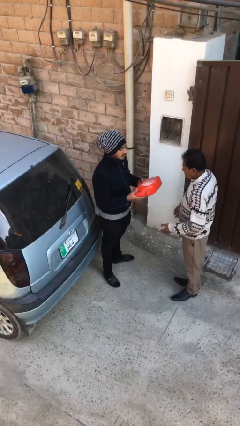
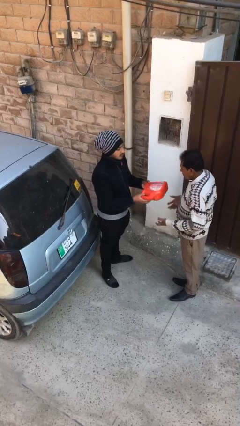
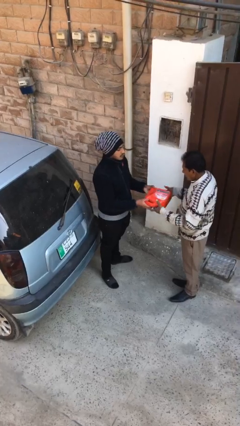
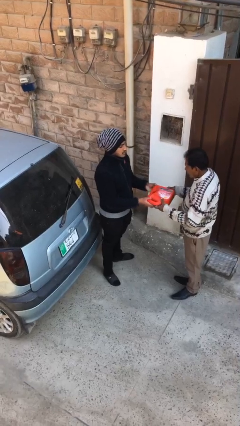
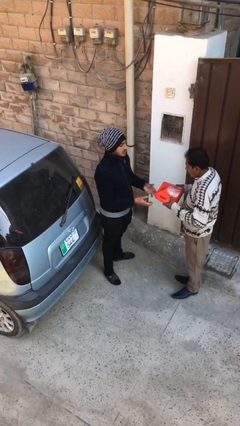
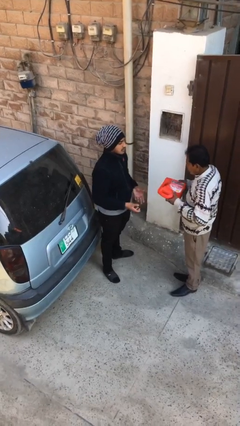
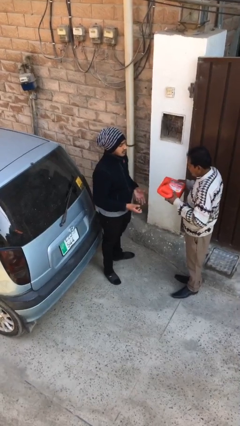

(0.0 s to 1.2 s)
person transfers object to person

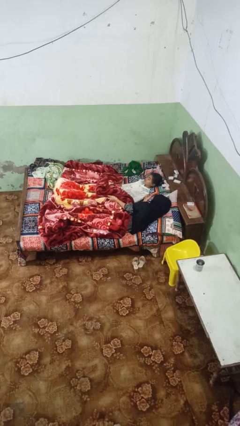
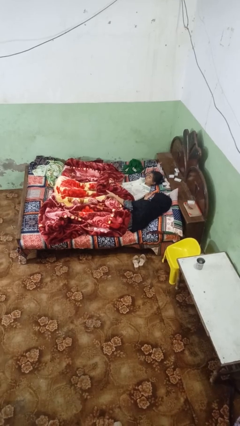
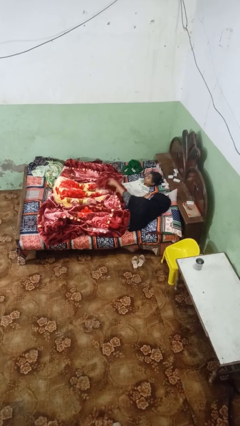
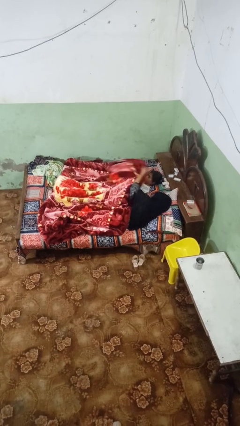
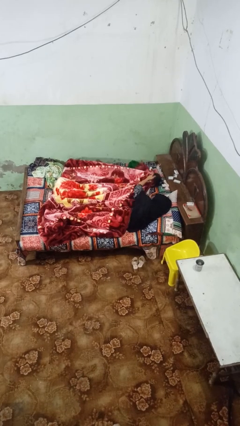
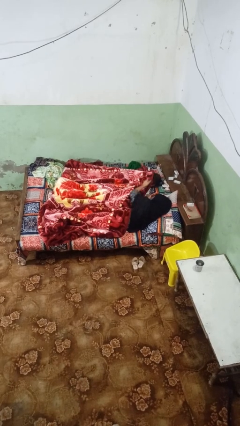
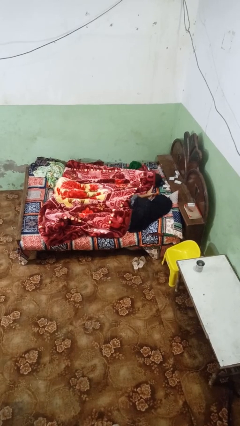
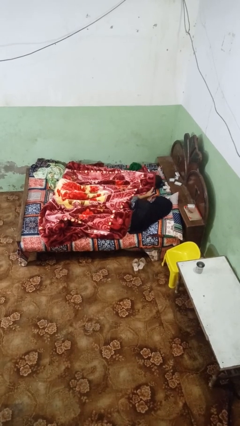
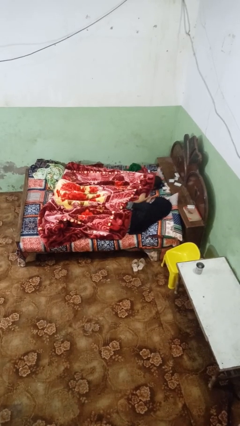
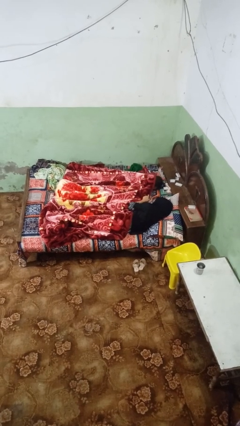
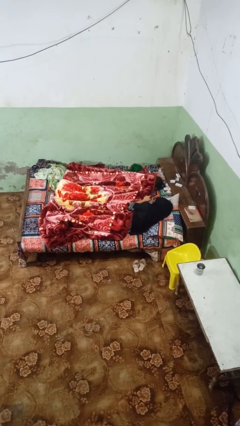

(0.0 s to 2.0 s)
person covers friend with blanket

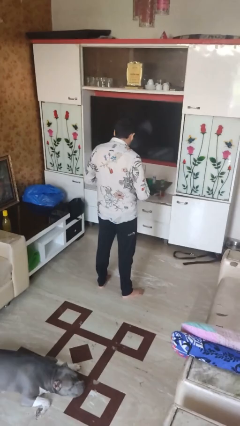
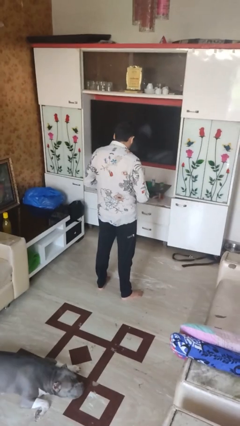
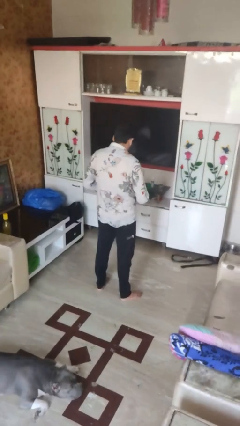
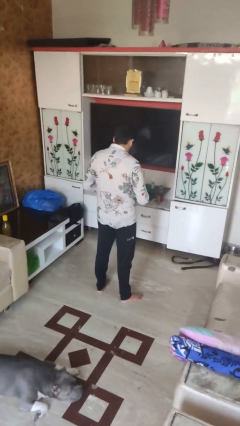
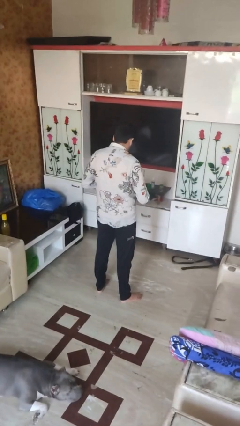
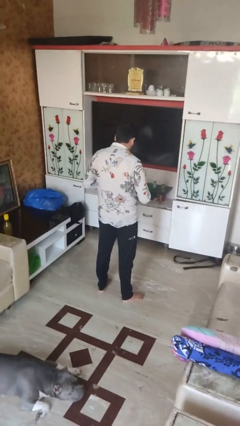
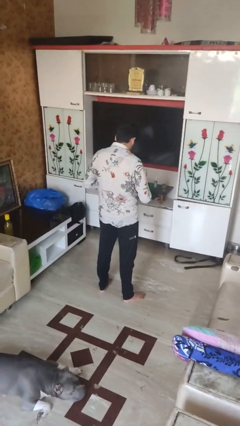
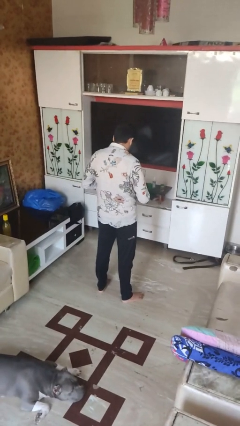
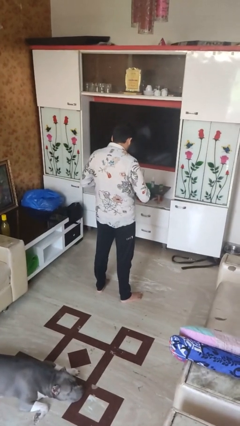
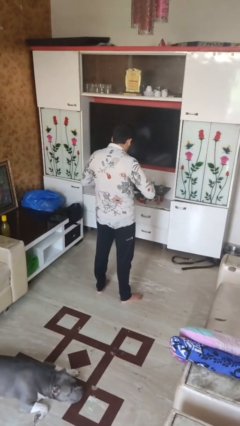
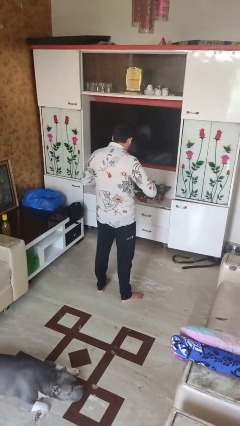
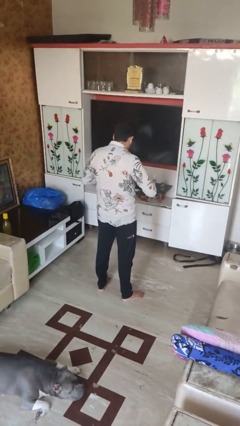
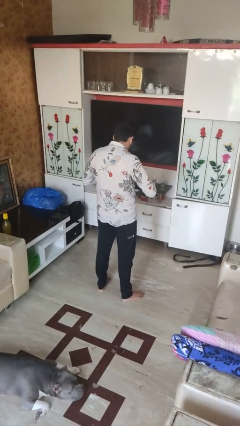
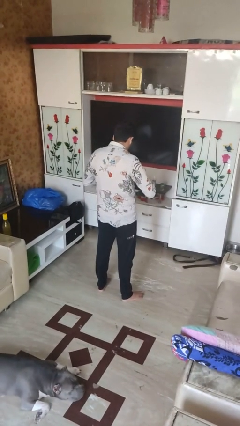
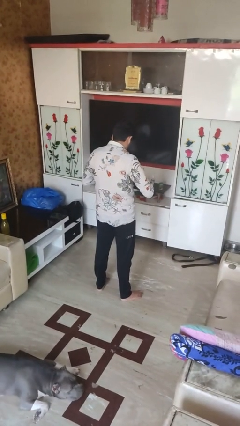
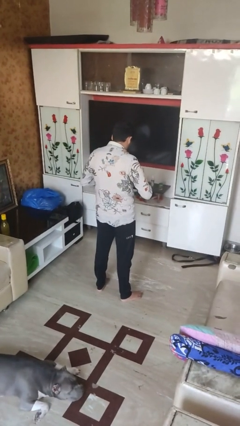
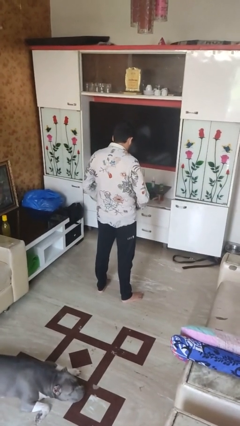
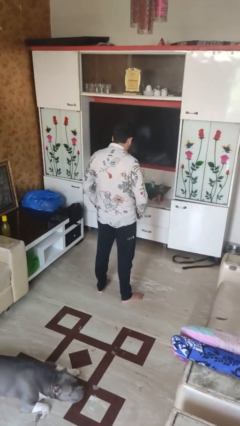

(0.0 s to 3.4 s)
person buttons shirt

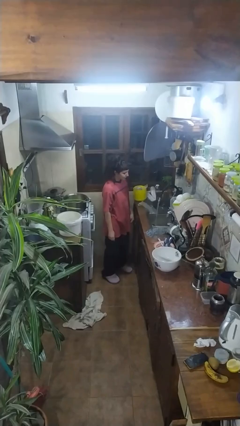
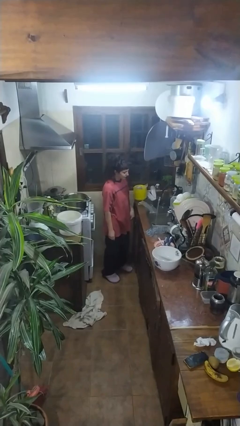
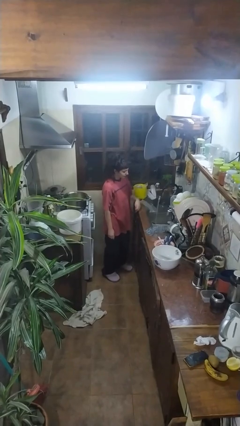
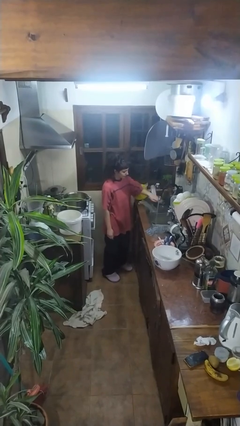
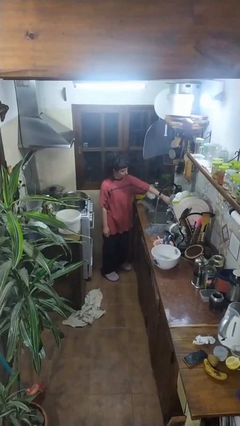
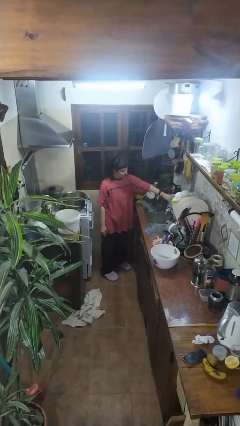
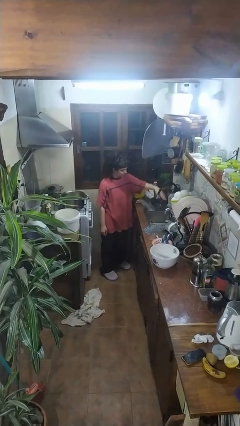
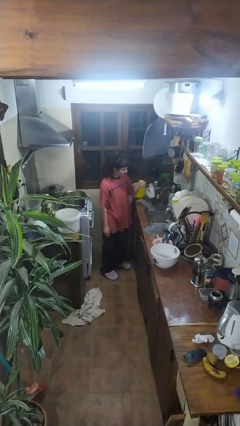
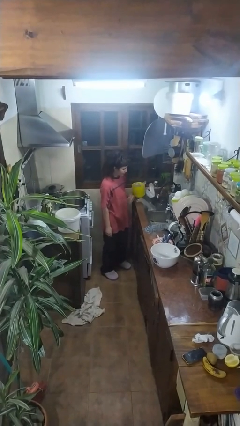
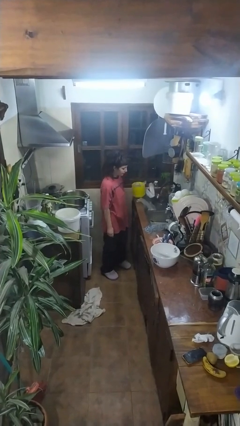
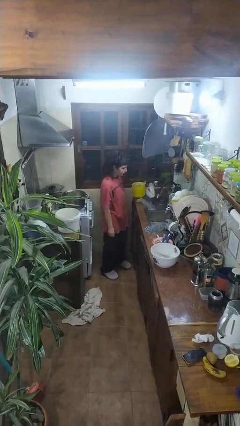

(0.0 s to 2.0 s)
person turns off faucet

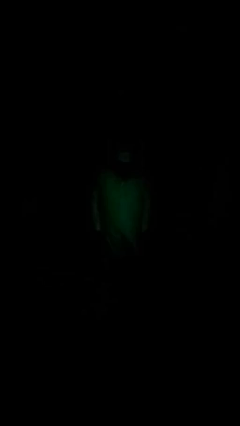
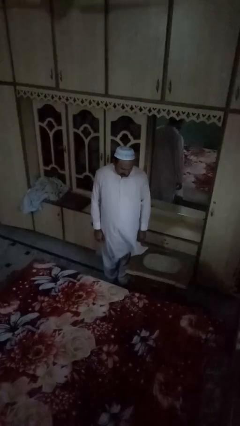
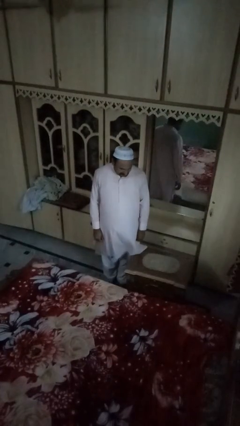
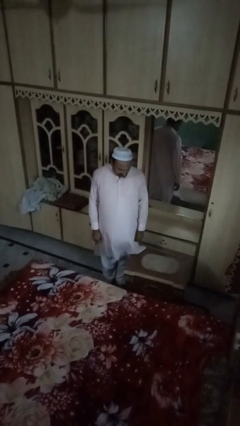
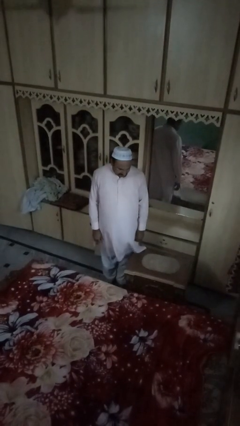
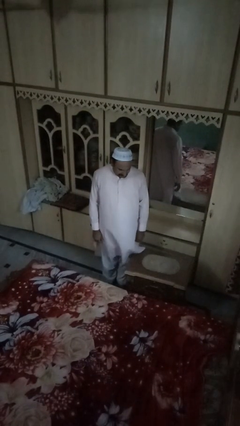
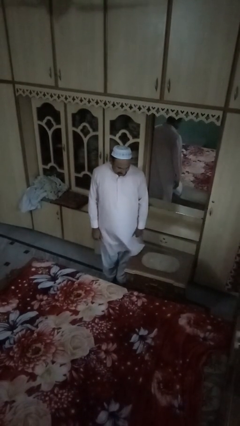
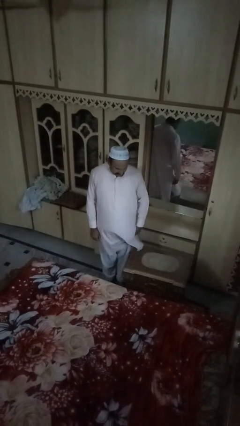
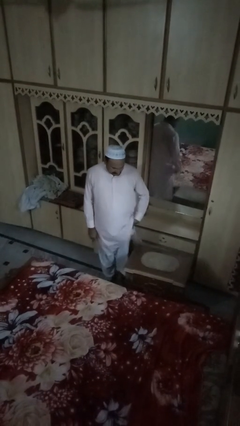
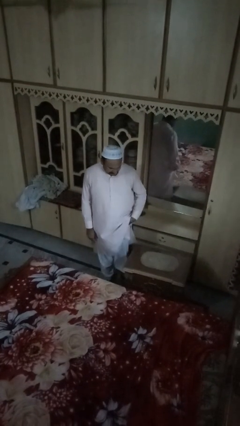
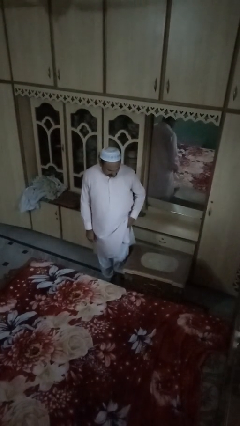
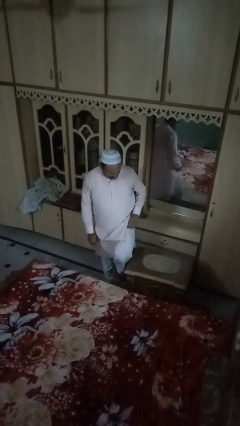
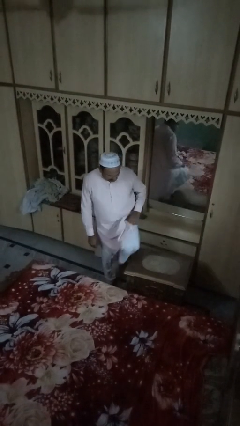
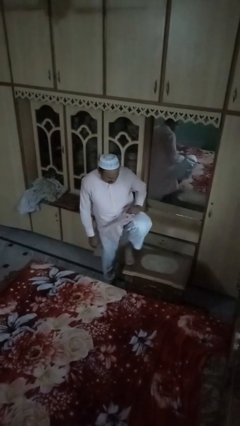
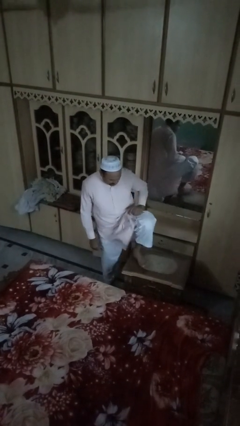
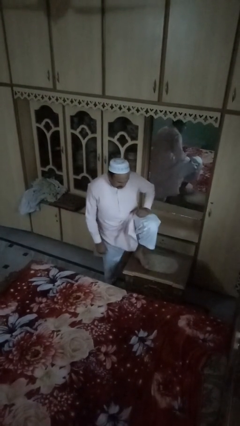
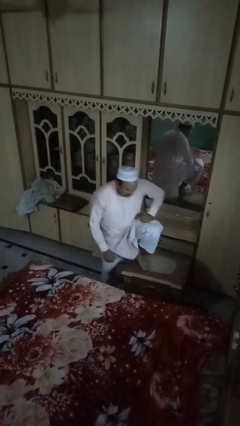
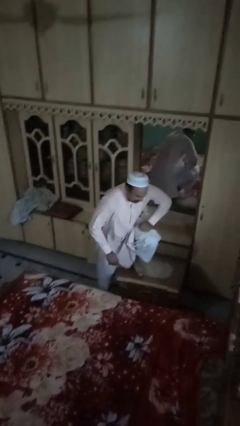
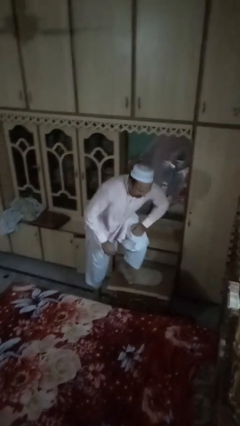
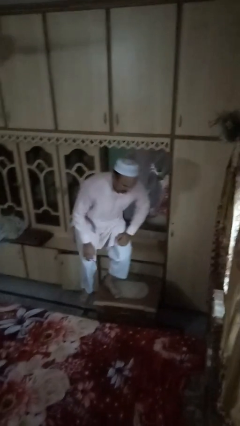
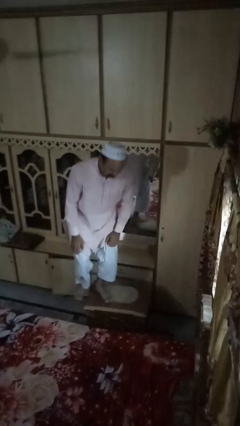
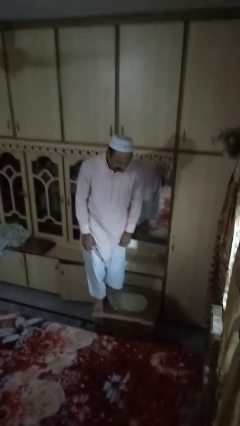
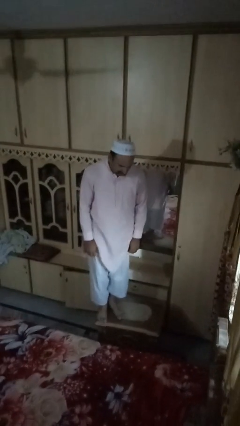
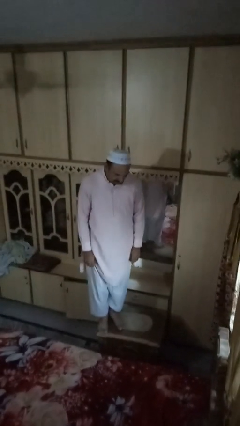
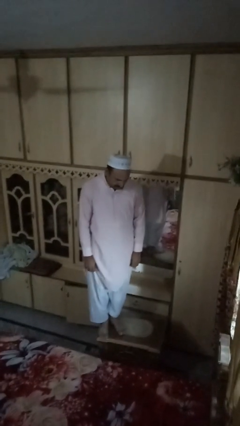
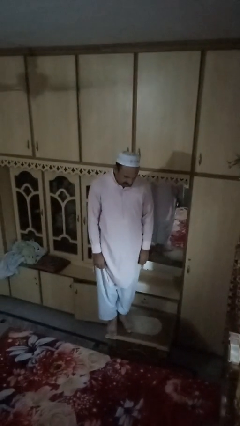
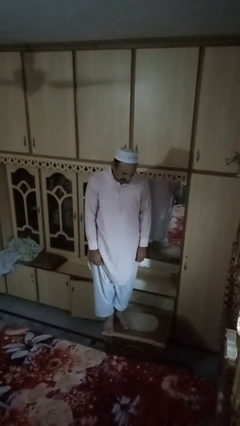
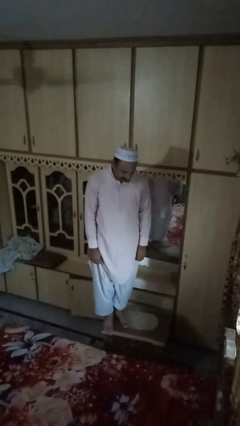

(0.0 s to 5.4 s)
person climbs on table

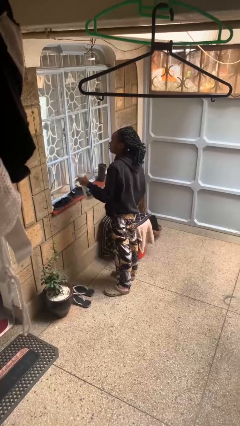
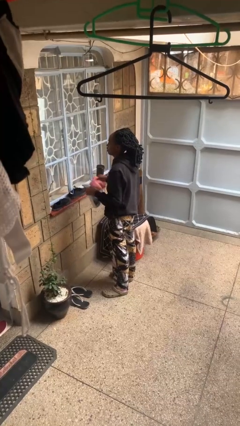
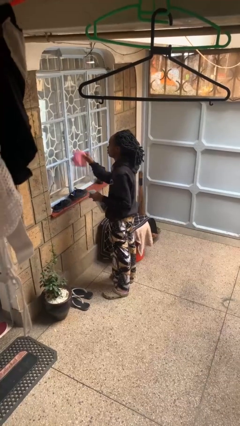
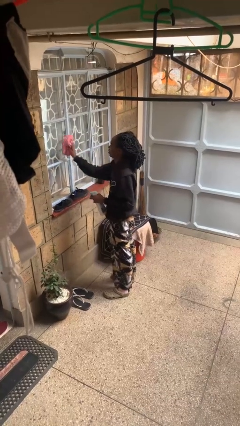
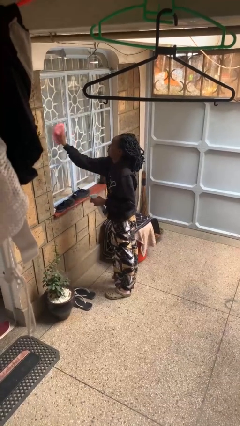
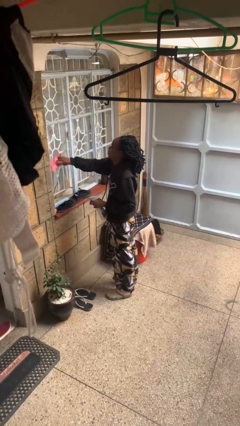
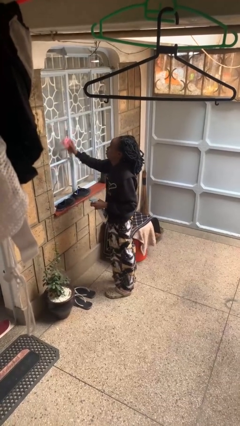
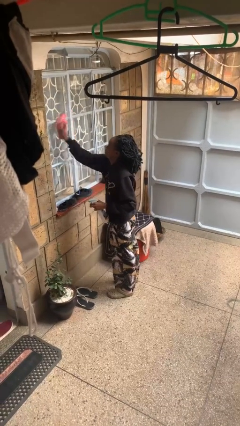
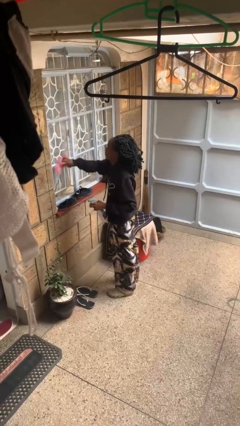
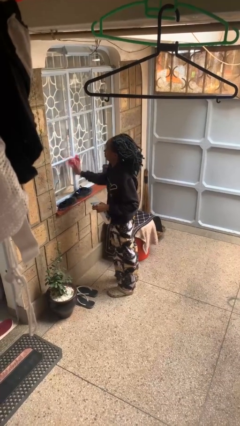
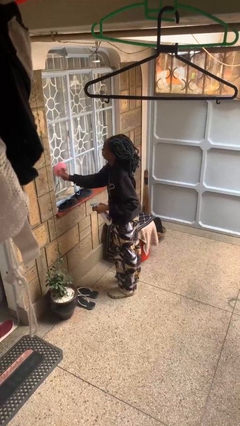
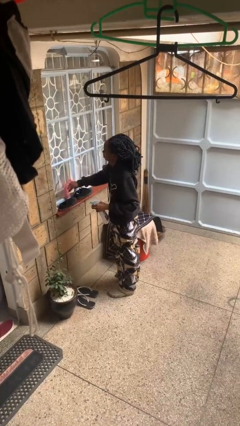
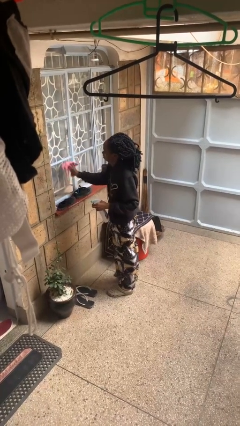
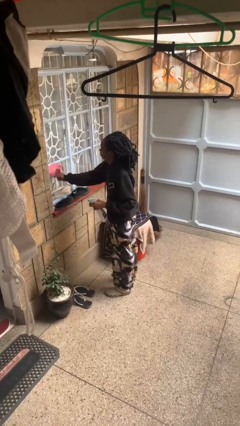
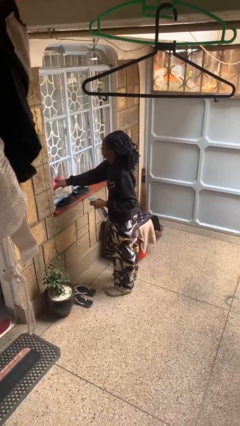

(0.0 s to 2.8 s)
person washes window

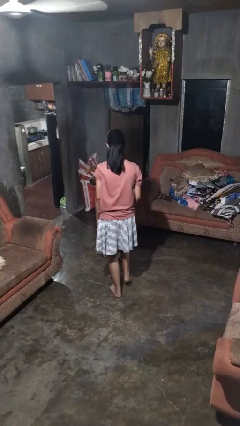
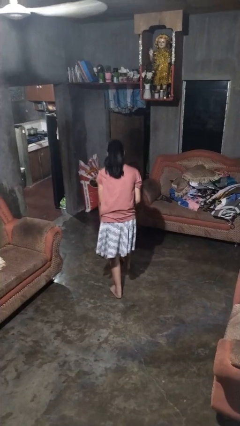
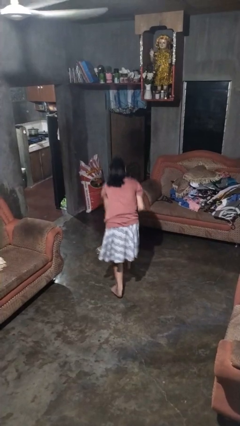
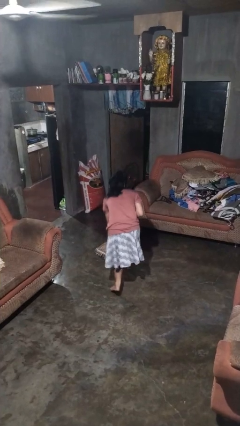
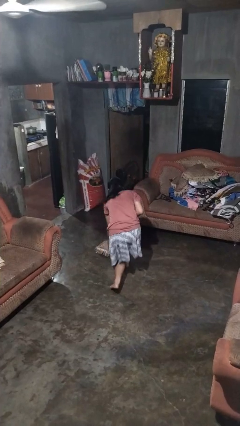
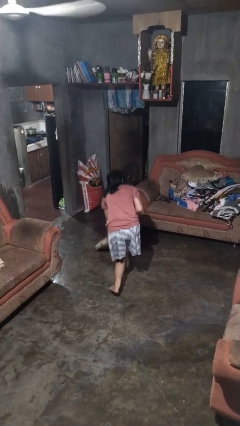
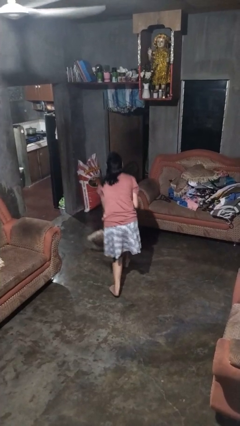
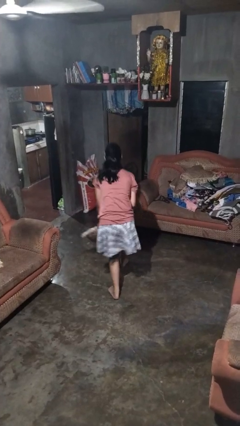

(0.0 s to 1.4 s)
person picks up object from floor
